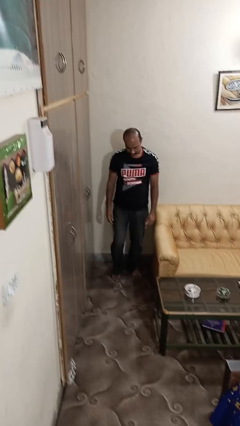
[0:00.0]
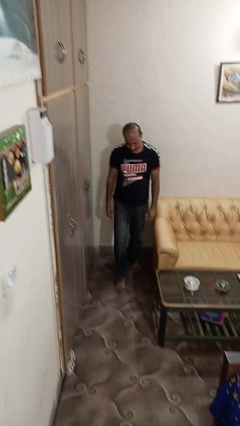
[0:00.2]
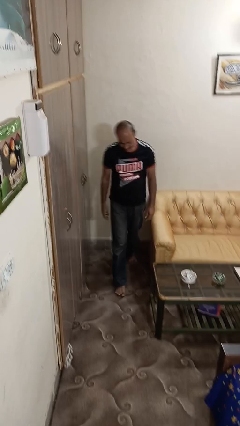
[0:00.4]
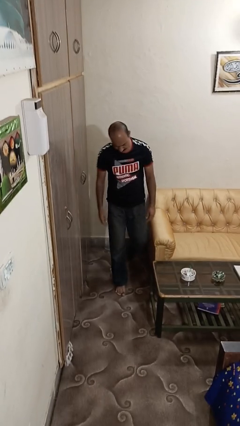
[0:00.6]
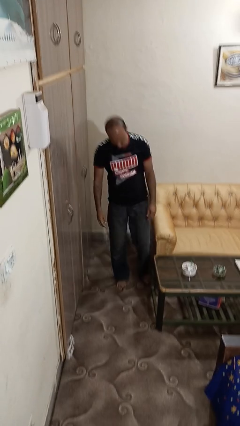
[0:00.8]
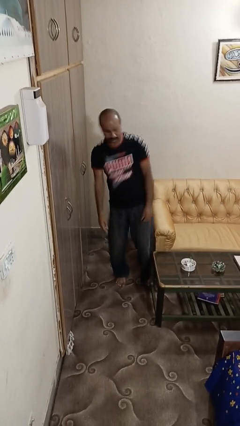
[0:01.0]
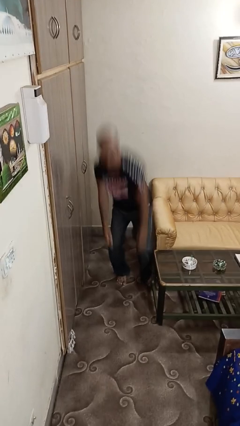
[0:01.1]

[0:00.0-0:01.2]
person trips on object on floor

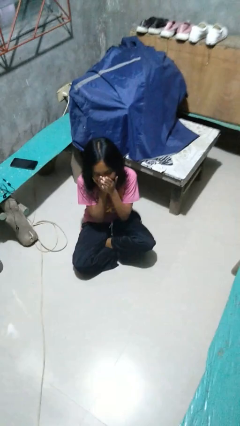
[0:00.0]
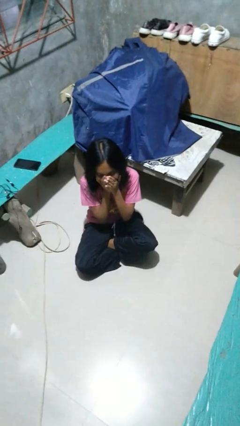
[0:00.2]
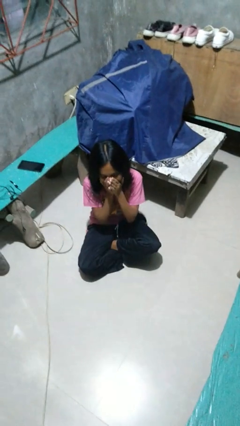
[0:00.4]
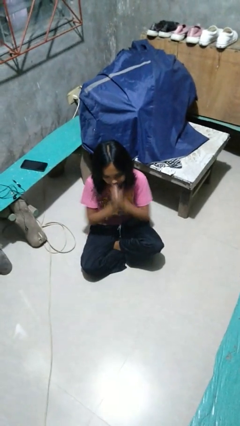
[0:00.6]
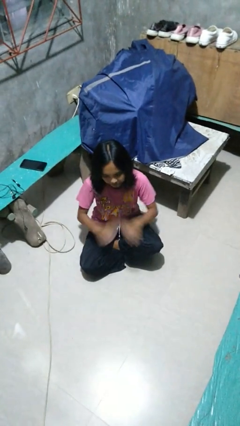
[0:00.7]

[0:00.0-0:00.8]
person yawns

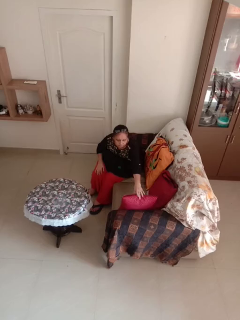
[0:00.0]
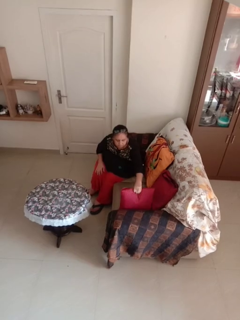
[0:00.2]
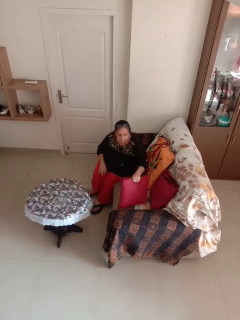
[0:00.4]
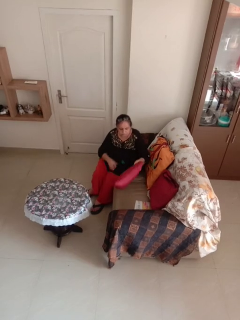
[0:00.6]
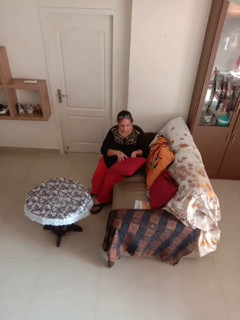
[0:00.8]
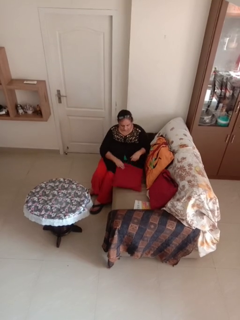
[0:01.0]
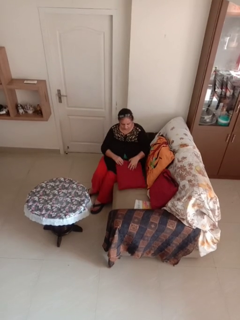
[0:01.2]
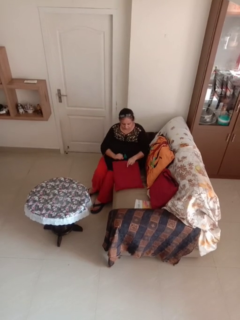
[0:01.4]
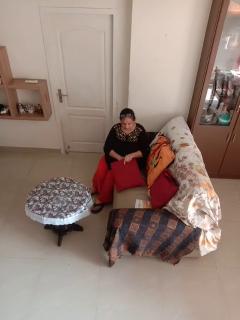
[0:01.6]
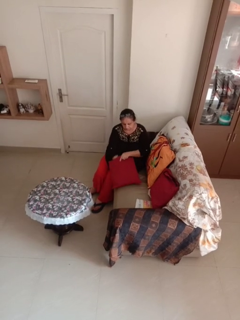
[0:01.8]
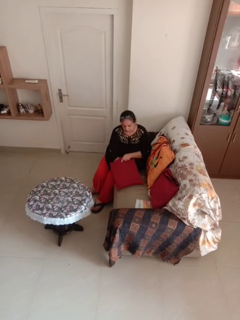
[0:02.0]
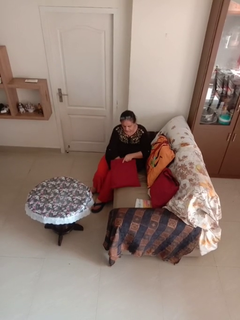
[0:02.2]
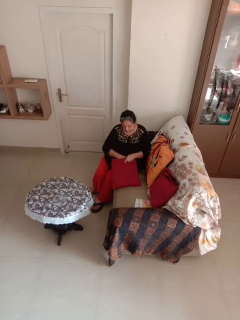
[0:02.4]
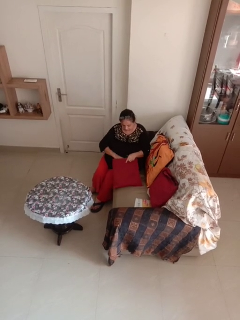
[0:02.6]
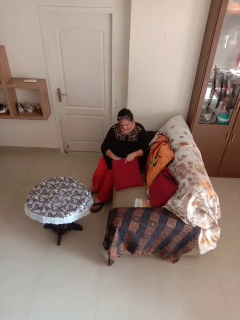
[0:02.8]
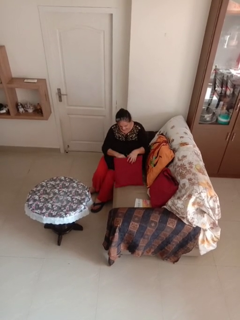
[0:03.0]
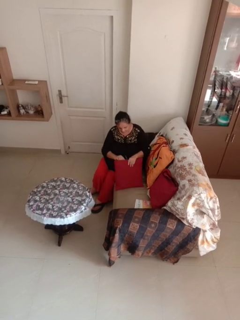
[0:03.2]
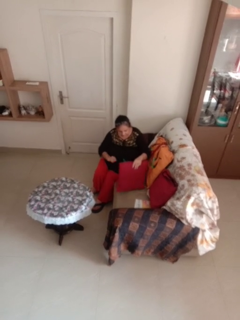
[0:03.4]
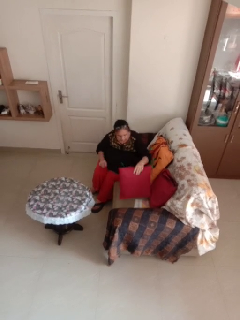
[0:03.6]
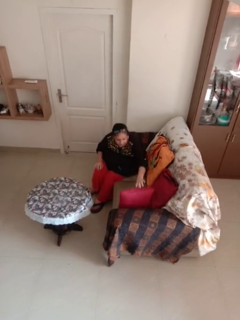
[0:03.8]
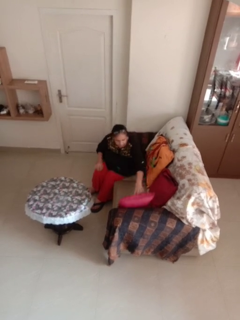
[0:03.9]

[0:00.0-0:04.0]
person searches in couch

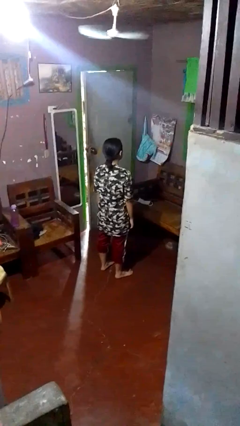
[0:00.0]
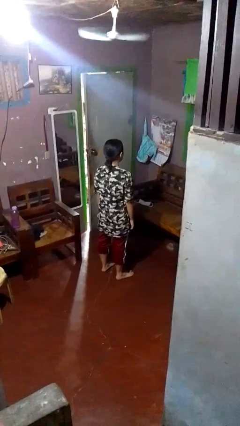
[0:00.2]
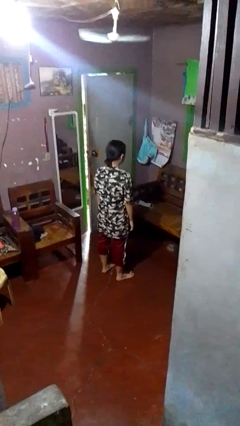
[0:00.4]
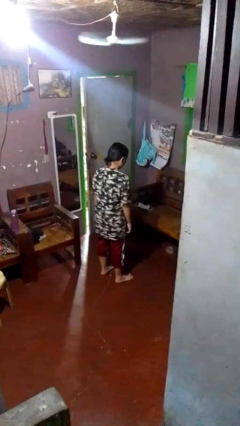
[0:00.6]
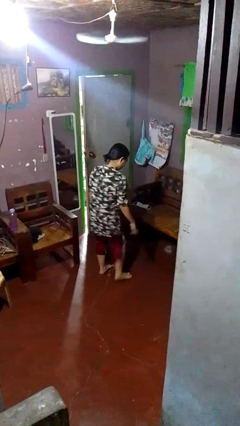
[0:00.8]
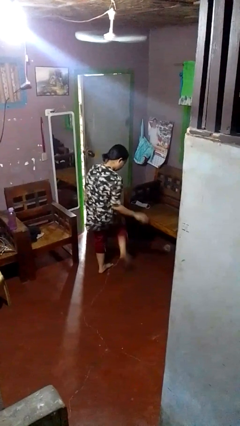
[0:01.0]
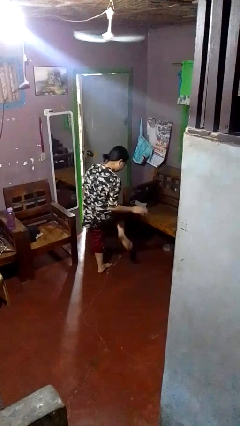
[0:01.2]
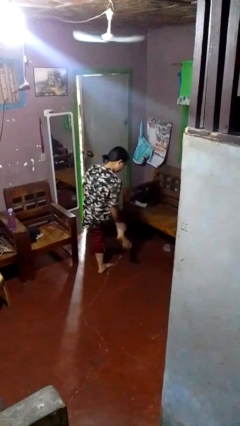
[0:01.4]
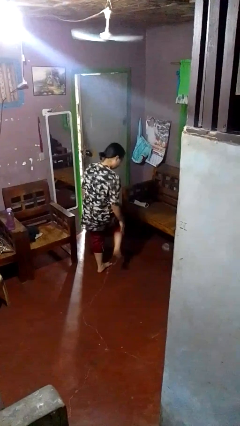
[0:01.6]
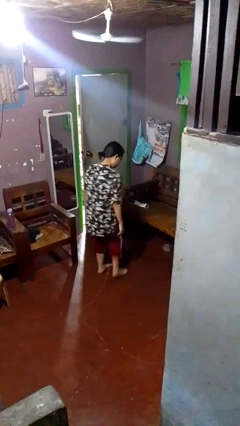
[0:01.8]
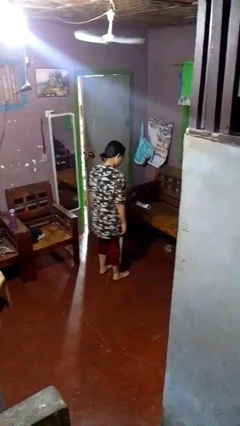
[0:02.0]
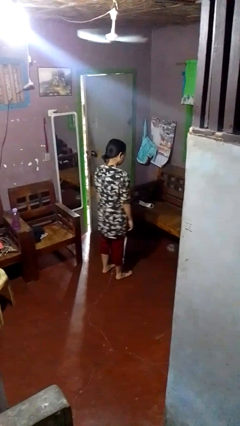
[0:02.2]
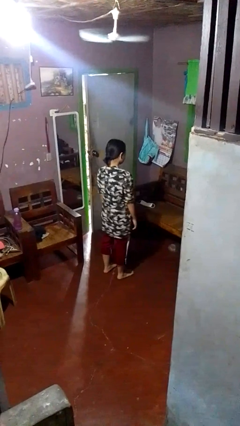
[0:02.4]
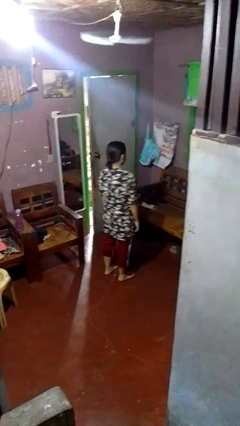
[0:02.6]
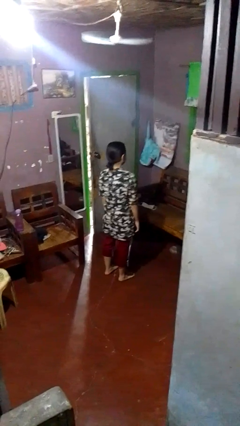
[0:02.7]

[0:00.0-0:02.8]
person swats bug

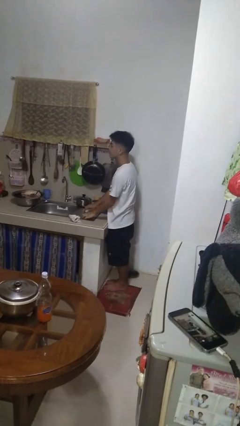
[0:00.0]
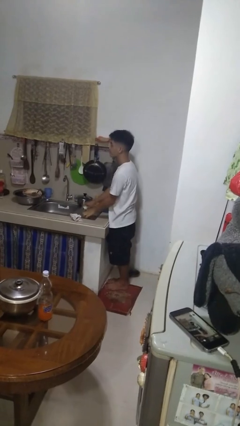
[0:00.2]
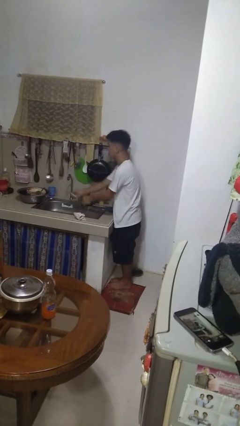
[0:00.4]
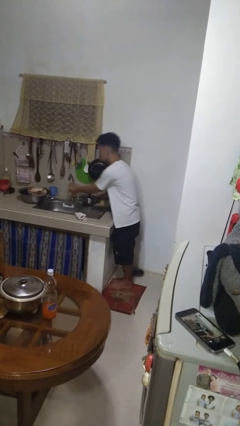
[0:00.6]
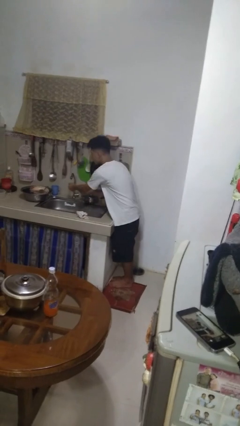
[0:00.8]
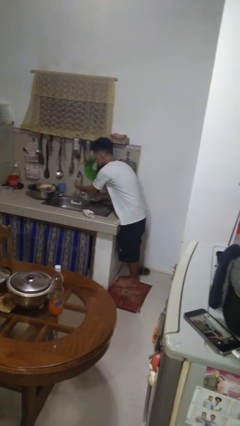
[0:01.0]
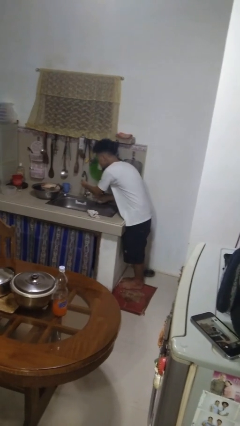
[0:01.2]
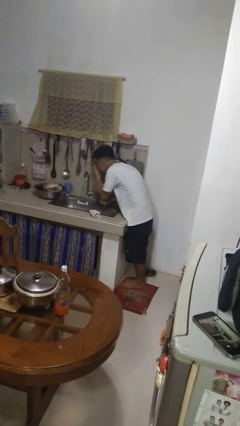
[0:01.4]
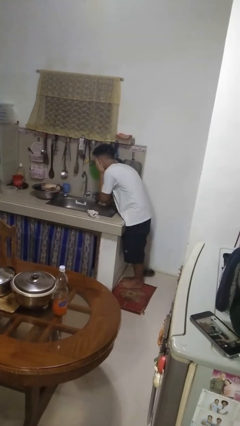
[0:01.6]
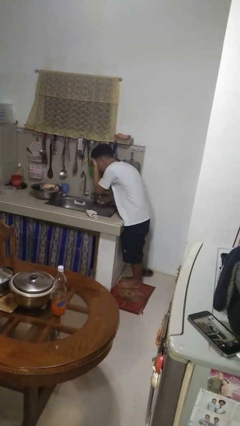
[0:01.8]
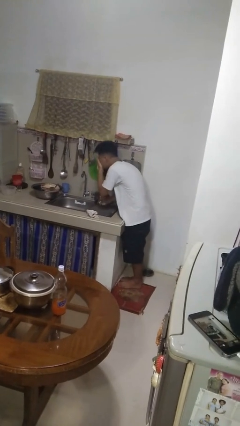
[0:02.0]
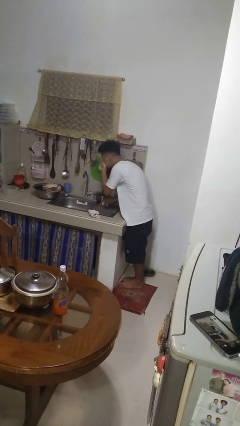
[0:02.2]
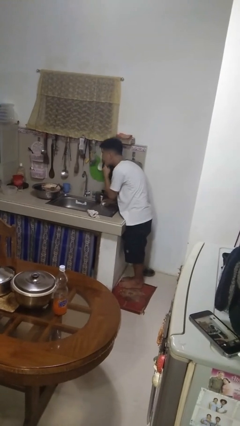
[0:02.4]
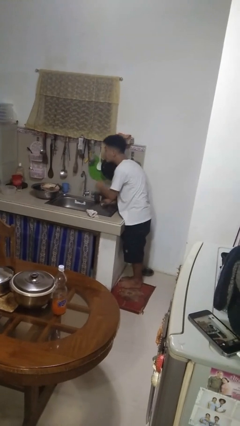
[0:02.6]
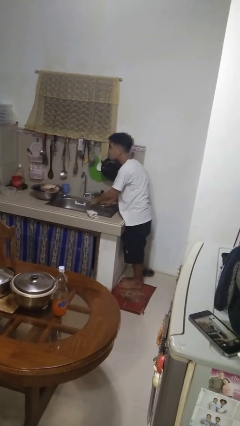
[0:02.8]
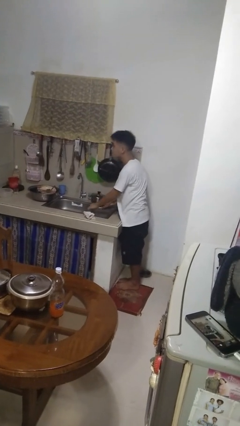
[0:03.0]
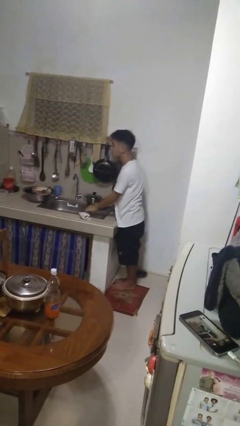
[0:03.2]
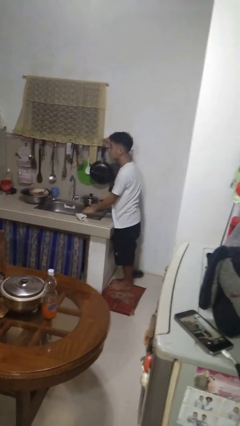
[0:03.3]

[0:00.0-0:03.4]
person washes face

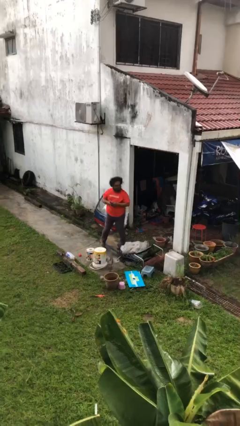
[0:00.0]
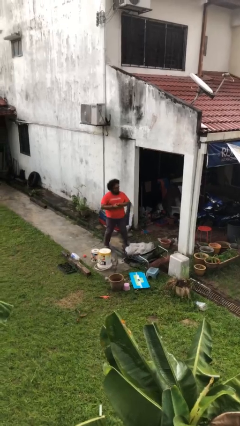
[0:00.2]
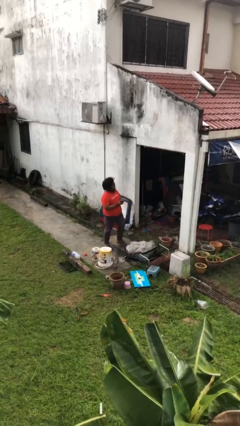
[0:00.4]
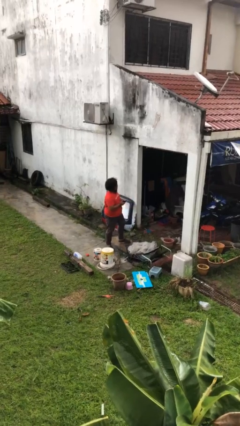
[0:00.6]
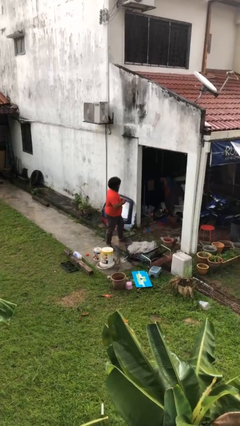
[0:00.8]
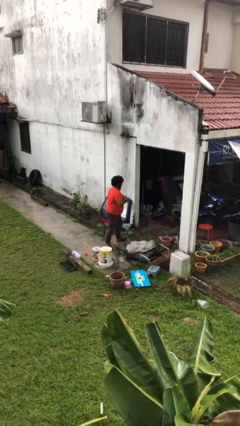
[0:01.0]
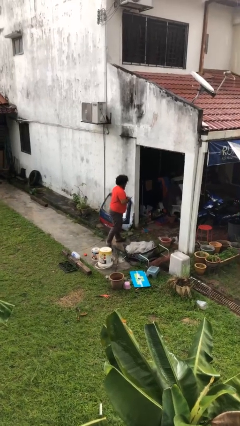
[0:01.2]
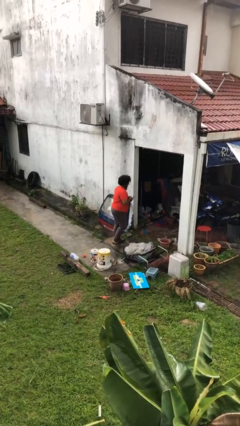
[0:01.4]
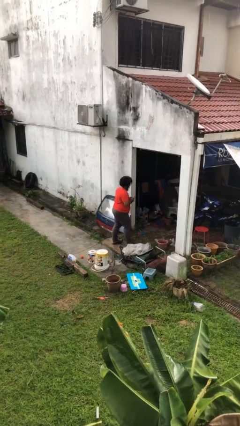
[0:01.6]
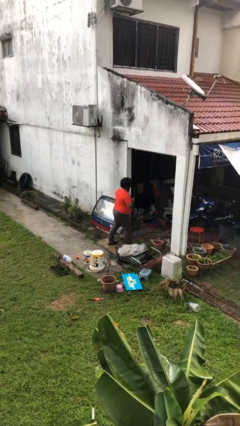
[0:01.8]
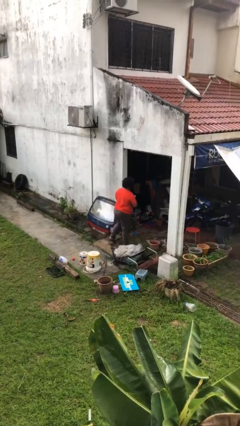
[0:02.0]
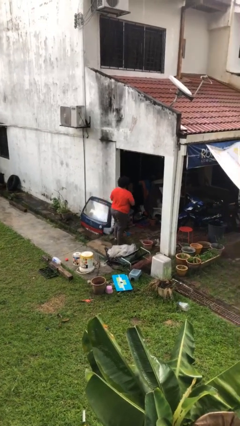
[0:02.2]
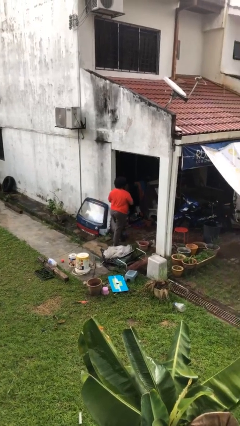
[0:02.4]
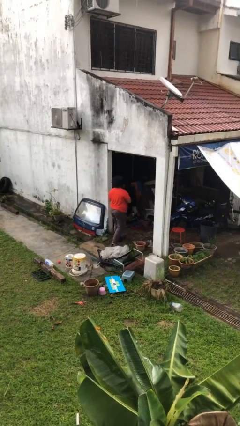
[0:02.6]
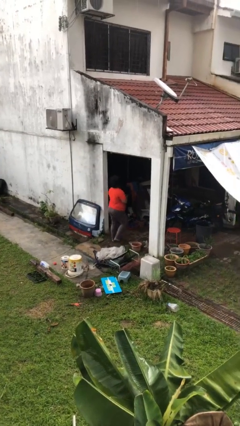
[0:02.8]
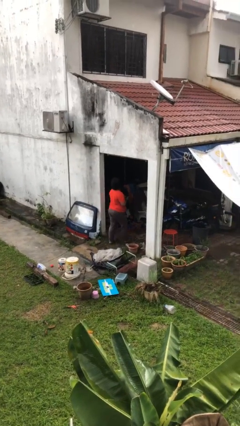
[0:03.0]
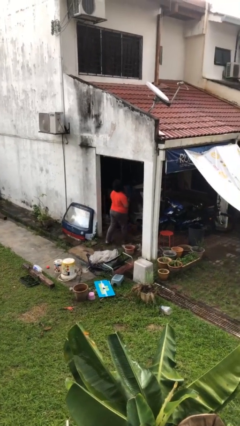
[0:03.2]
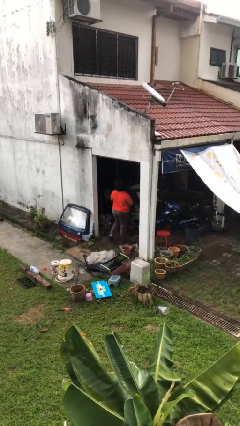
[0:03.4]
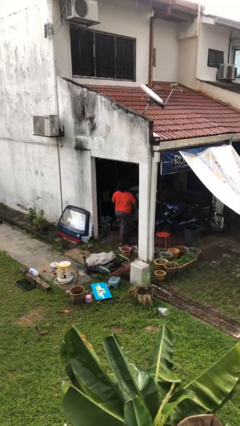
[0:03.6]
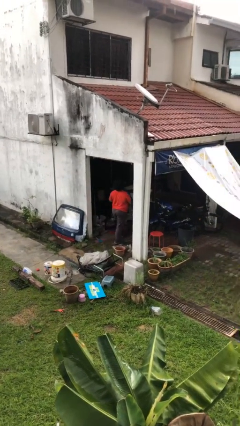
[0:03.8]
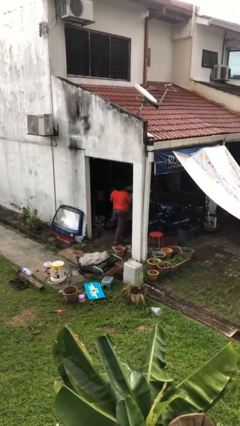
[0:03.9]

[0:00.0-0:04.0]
person exits scene through structure

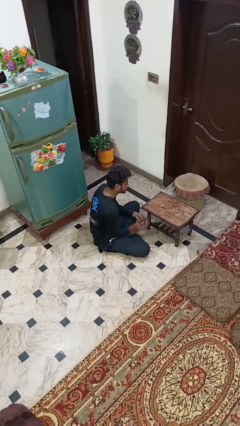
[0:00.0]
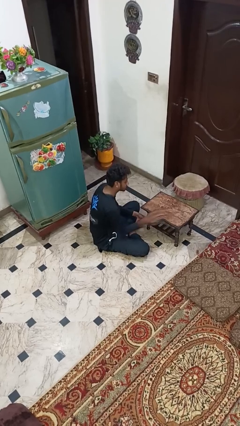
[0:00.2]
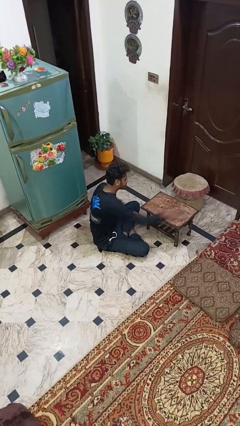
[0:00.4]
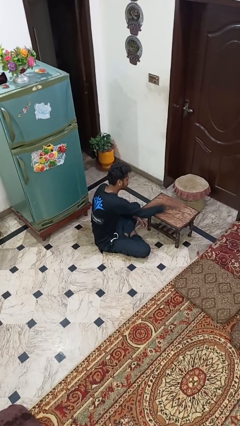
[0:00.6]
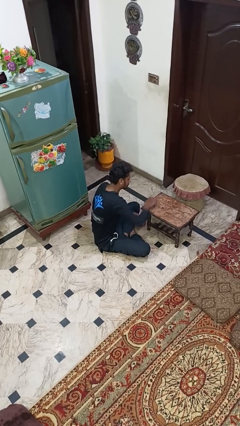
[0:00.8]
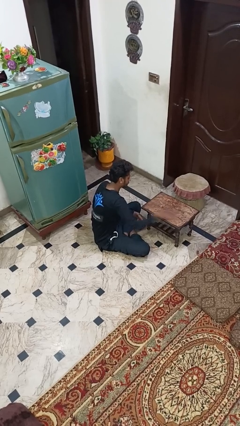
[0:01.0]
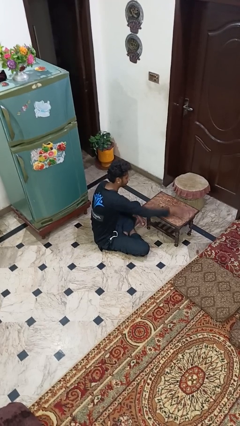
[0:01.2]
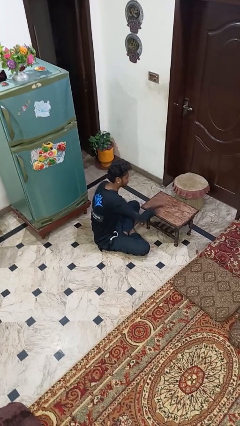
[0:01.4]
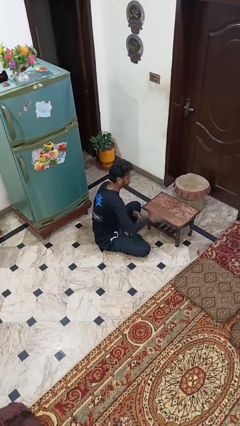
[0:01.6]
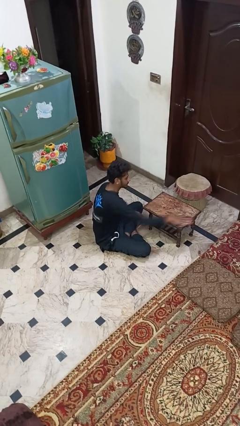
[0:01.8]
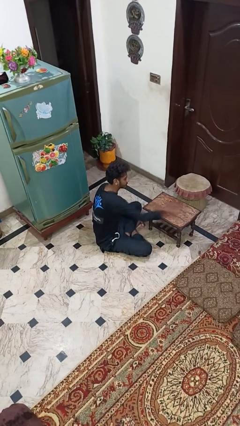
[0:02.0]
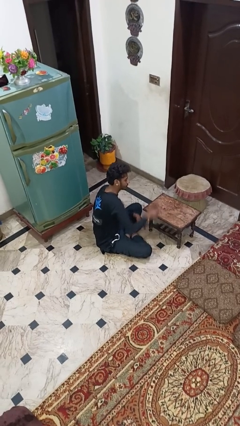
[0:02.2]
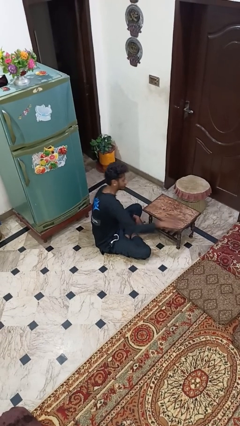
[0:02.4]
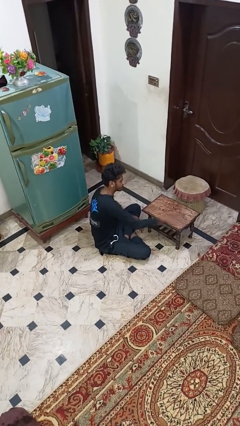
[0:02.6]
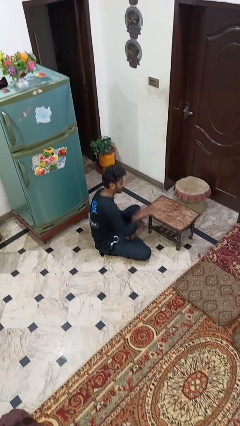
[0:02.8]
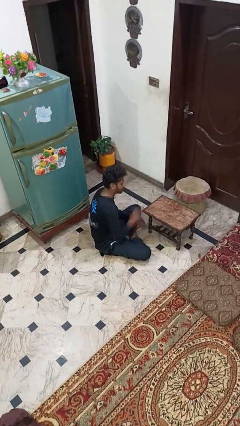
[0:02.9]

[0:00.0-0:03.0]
person cleans table with rag
